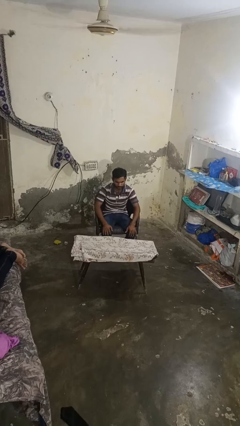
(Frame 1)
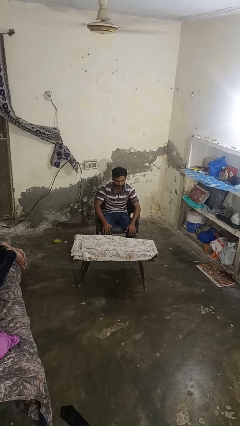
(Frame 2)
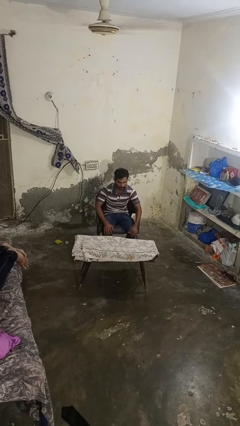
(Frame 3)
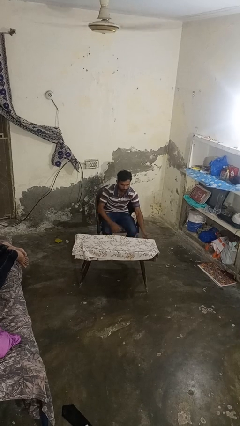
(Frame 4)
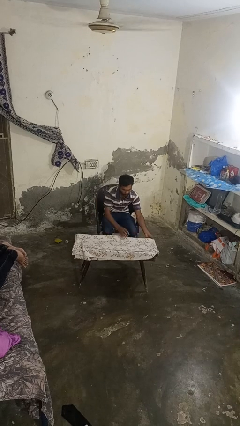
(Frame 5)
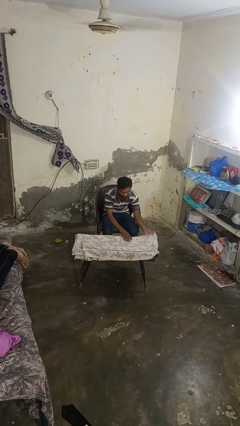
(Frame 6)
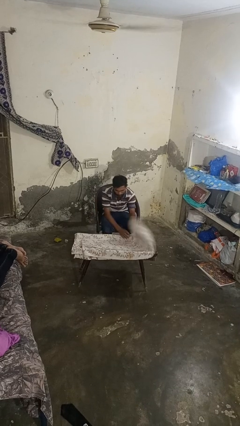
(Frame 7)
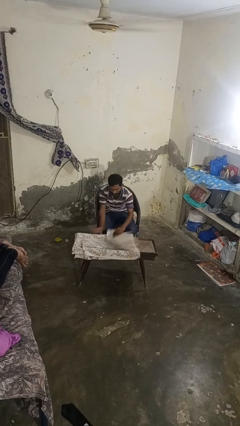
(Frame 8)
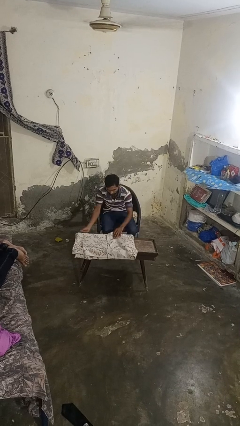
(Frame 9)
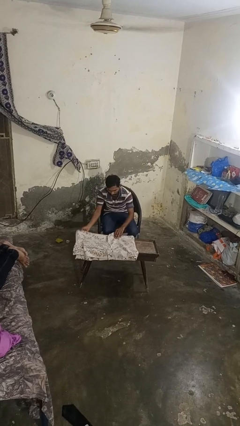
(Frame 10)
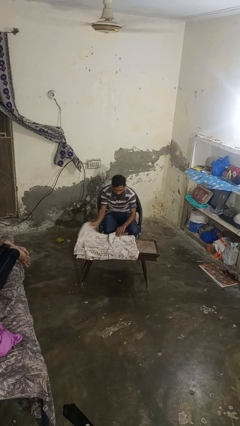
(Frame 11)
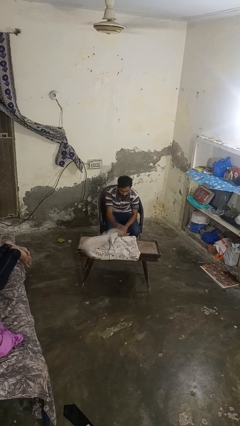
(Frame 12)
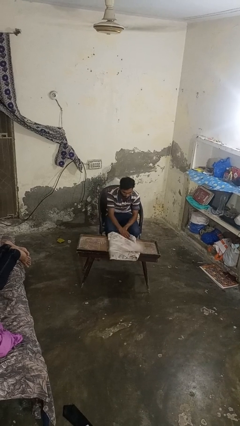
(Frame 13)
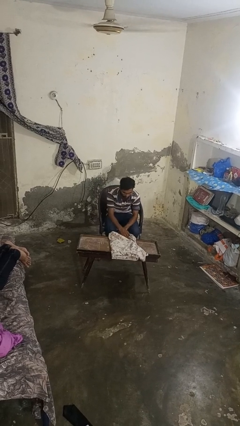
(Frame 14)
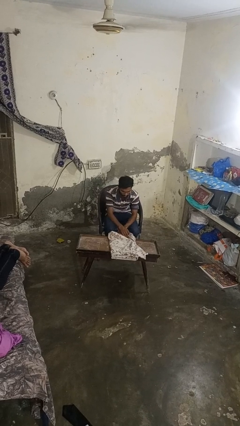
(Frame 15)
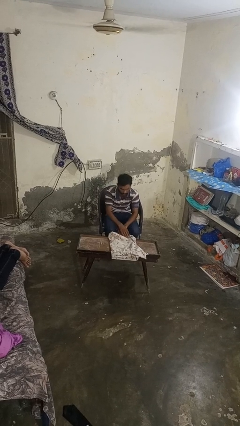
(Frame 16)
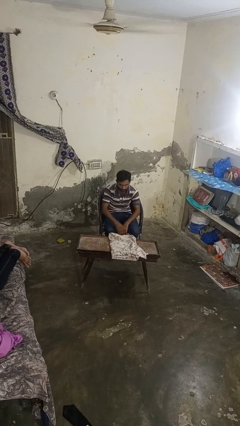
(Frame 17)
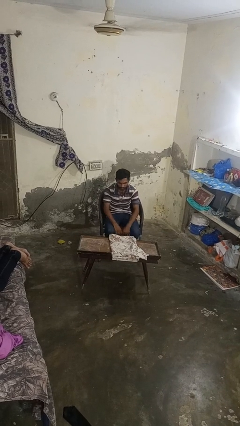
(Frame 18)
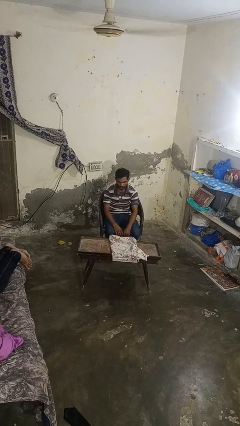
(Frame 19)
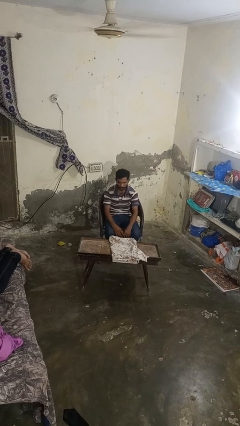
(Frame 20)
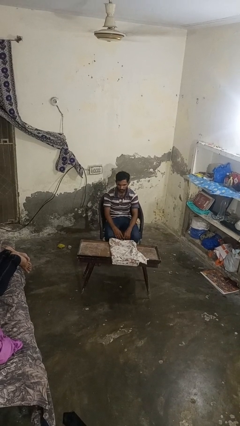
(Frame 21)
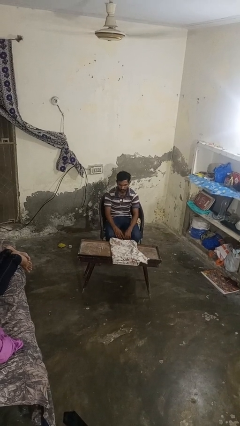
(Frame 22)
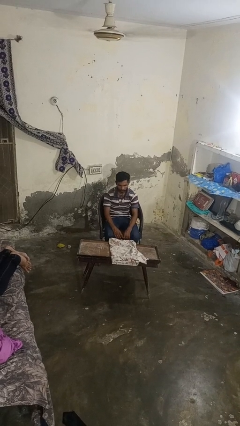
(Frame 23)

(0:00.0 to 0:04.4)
person folds tablecloth

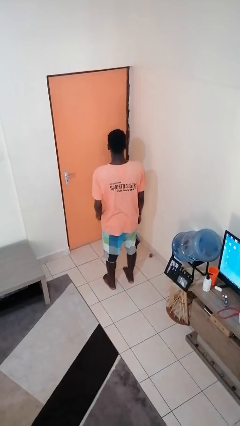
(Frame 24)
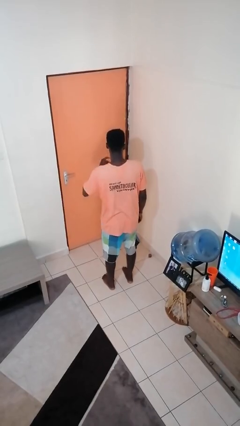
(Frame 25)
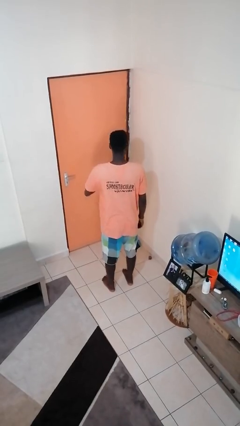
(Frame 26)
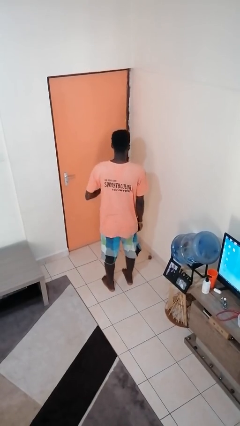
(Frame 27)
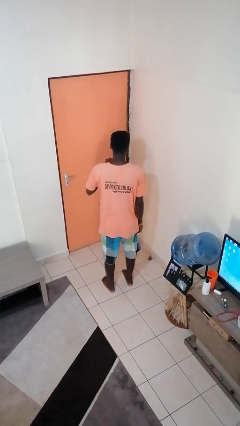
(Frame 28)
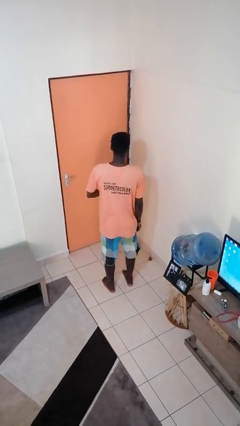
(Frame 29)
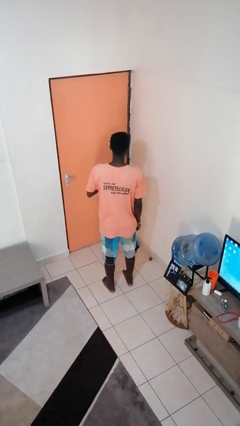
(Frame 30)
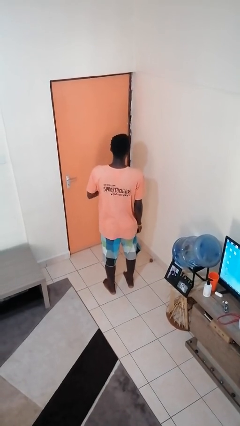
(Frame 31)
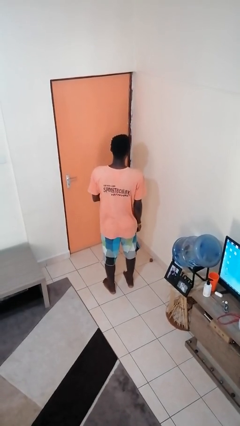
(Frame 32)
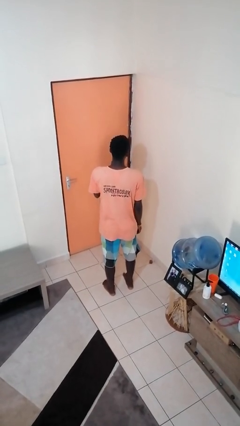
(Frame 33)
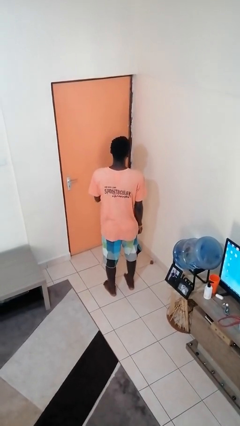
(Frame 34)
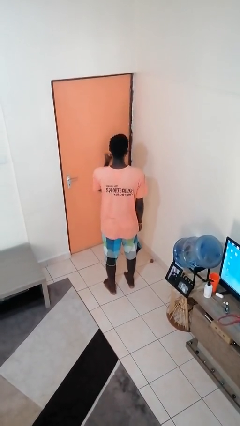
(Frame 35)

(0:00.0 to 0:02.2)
person snaps fingers

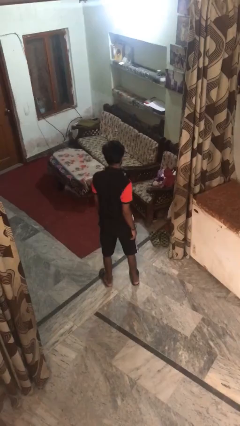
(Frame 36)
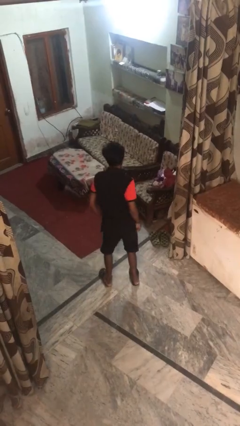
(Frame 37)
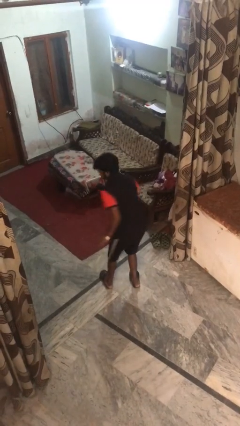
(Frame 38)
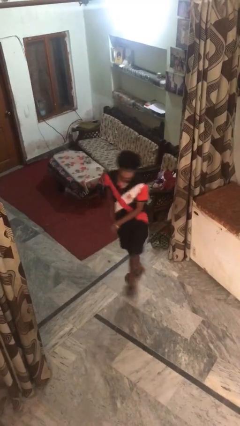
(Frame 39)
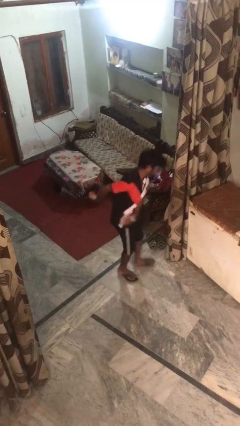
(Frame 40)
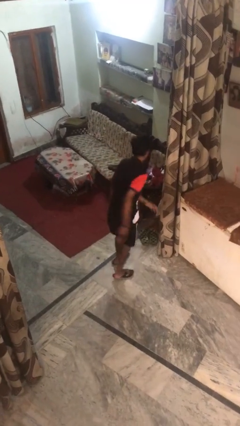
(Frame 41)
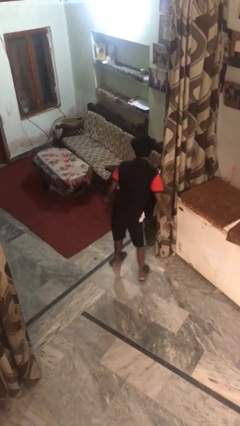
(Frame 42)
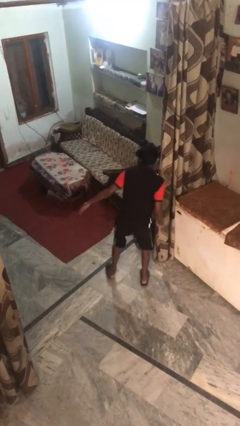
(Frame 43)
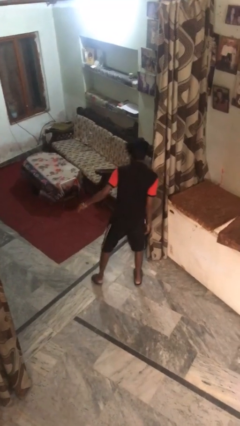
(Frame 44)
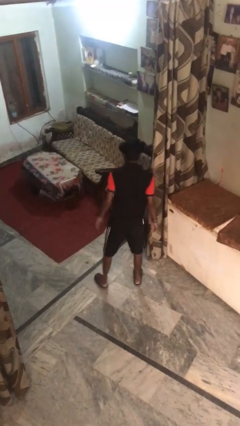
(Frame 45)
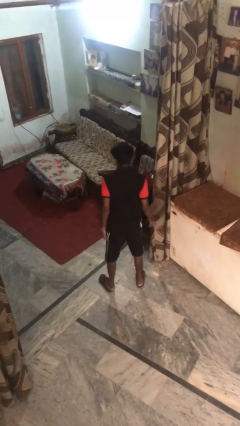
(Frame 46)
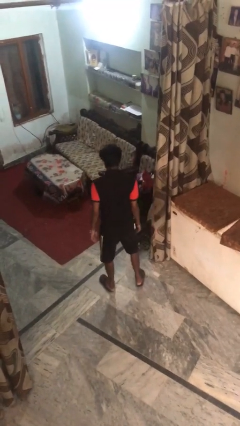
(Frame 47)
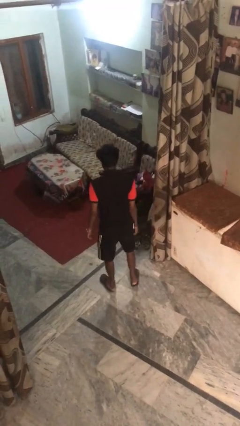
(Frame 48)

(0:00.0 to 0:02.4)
person twirls

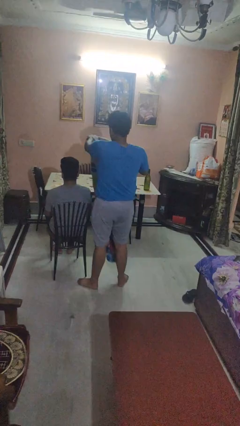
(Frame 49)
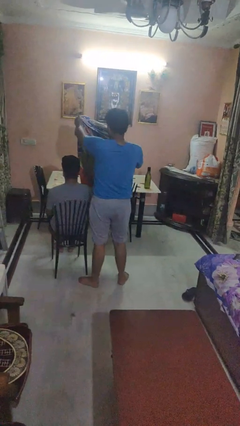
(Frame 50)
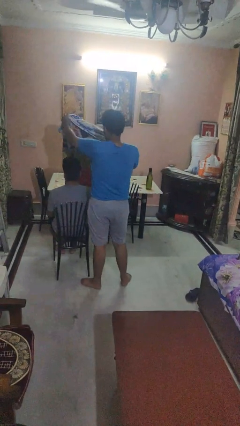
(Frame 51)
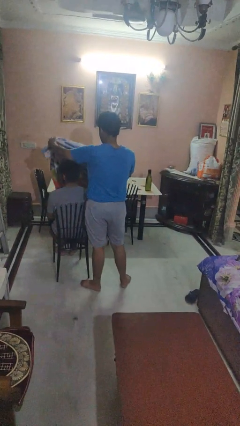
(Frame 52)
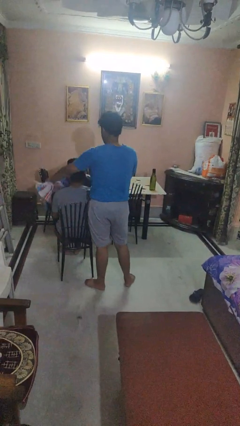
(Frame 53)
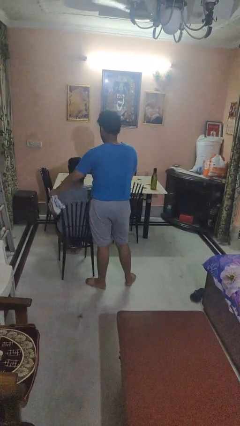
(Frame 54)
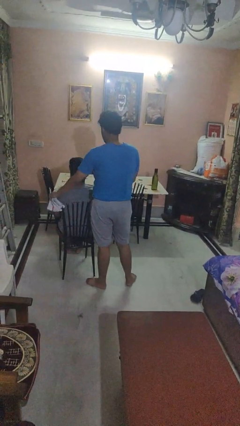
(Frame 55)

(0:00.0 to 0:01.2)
person covers friend with blanket

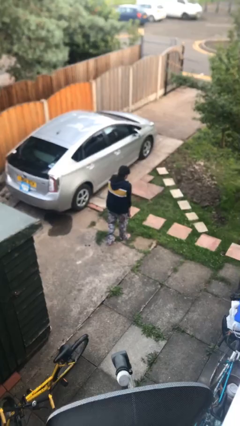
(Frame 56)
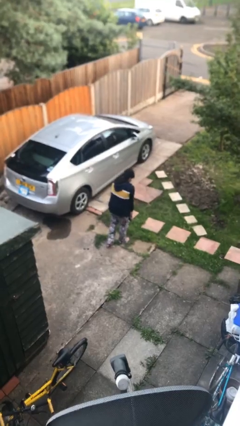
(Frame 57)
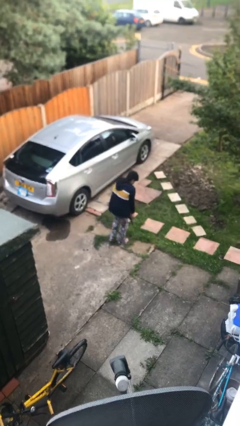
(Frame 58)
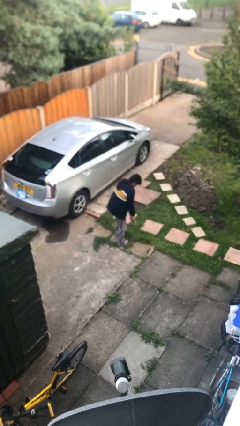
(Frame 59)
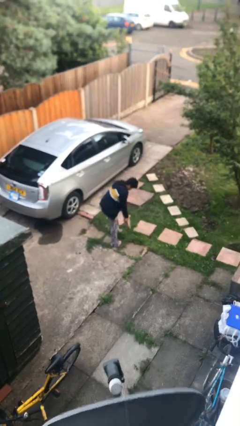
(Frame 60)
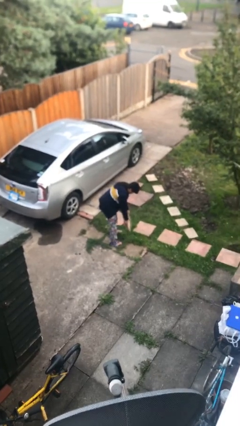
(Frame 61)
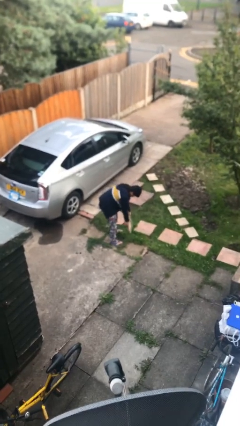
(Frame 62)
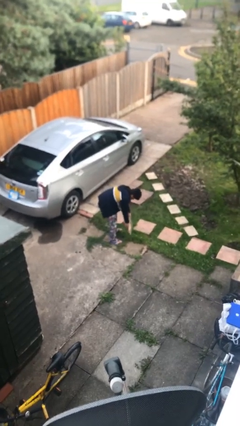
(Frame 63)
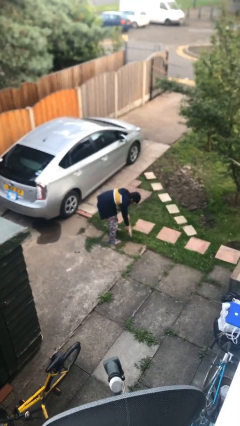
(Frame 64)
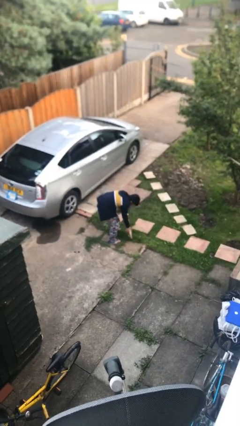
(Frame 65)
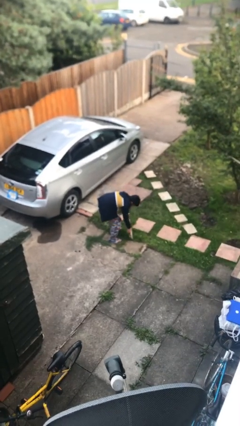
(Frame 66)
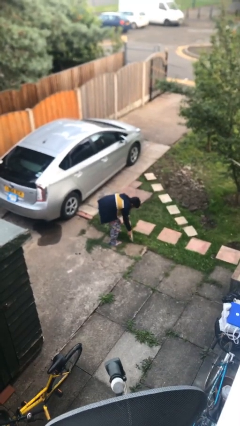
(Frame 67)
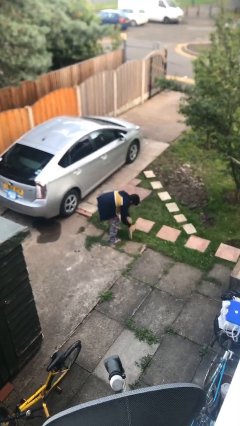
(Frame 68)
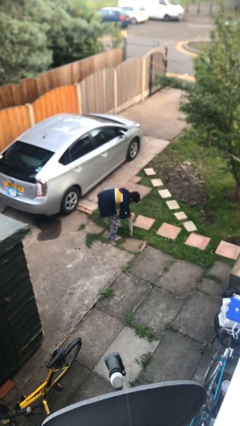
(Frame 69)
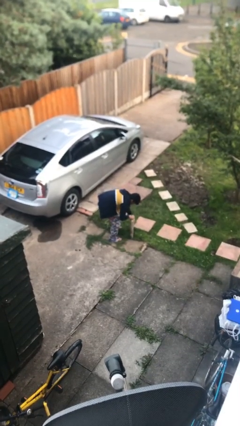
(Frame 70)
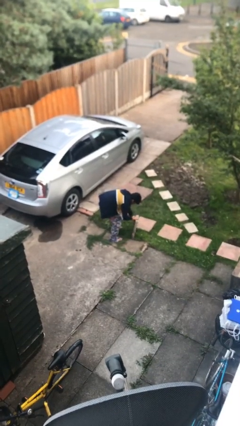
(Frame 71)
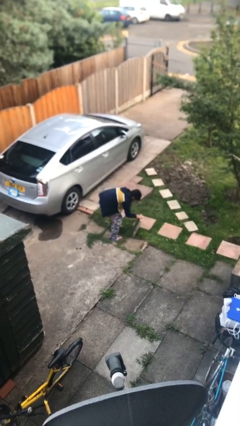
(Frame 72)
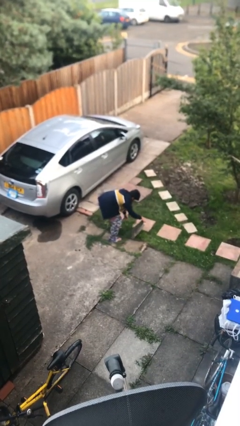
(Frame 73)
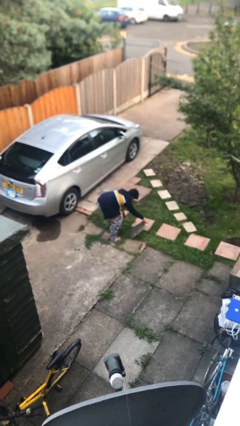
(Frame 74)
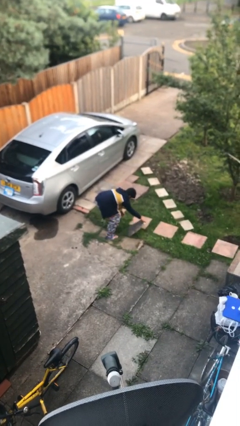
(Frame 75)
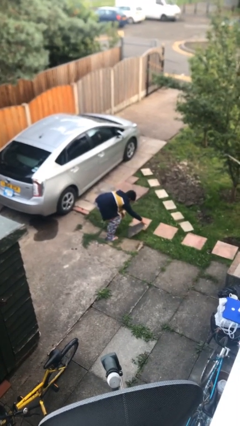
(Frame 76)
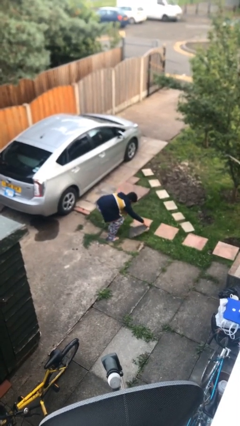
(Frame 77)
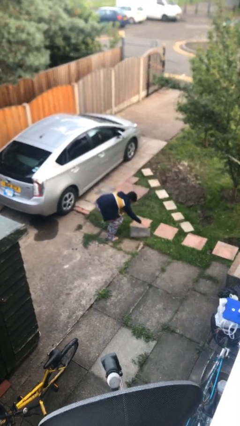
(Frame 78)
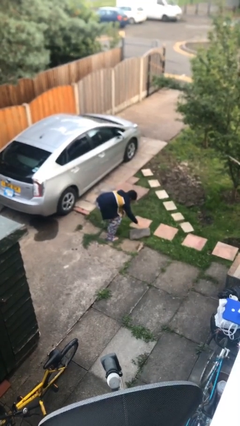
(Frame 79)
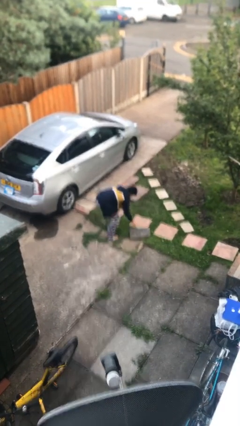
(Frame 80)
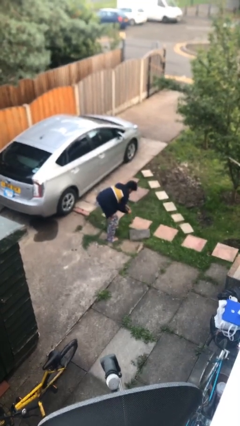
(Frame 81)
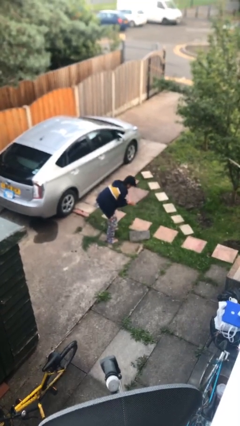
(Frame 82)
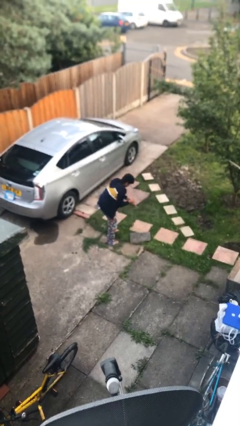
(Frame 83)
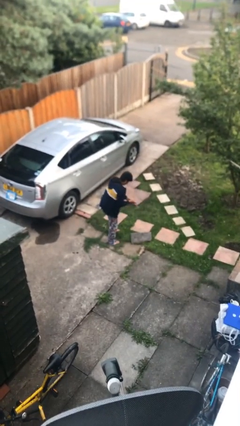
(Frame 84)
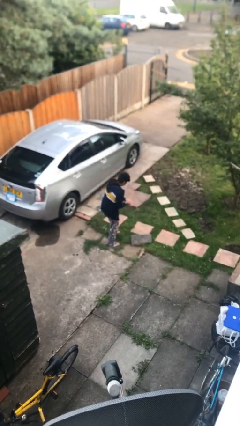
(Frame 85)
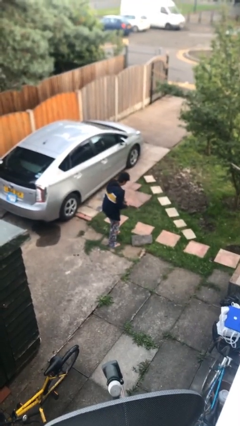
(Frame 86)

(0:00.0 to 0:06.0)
person puts down object on floor

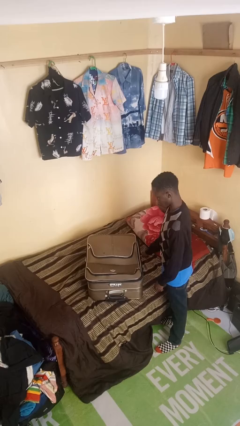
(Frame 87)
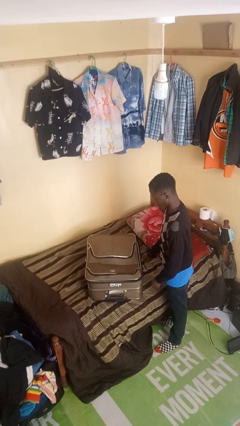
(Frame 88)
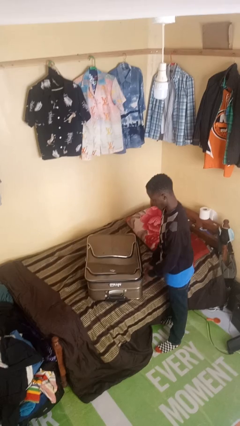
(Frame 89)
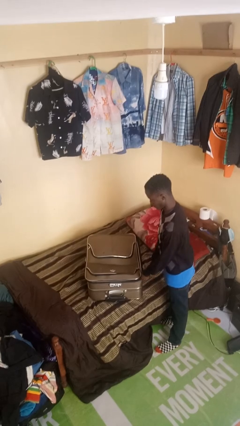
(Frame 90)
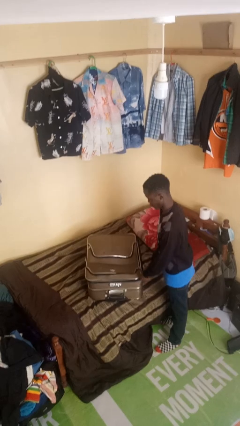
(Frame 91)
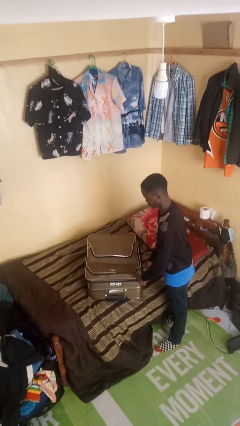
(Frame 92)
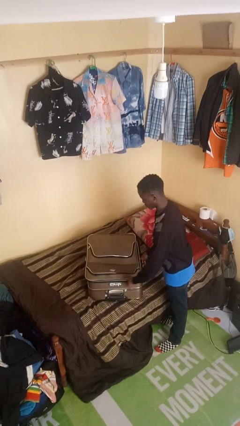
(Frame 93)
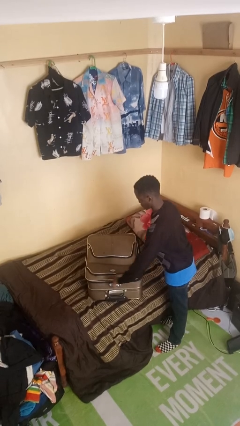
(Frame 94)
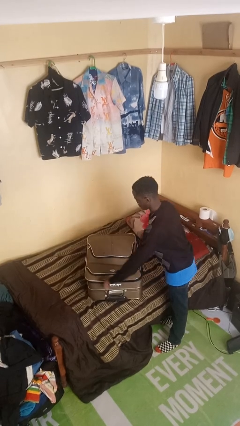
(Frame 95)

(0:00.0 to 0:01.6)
person opens suitcase
